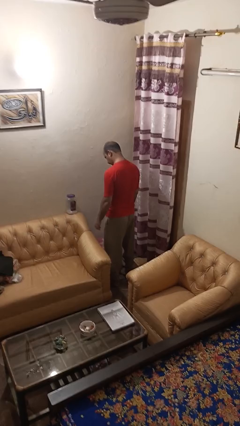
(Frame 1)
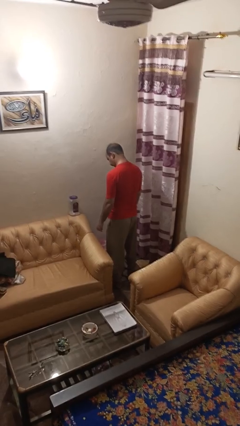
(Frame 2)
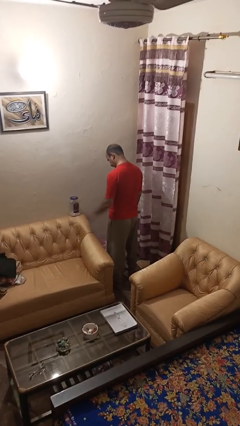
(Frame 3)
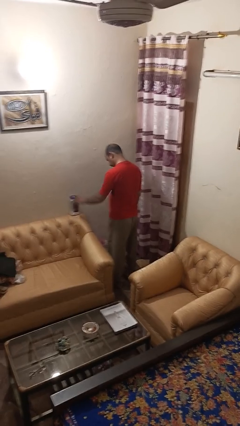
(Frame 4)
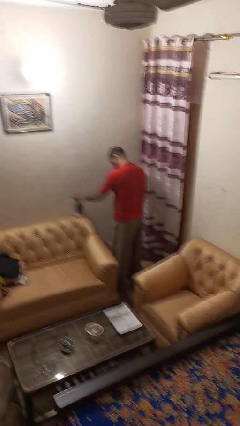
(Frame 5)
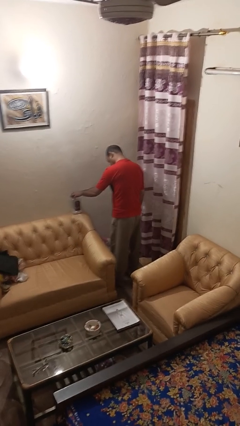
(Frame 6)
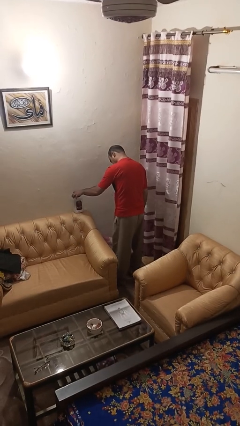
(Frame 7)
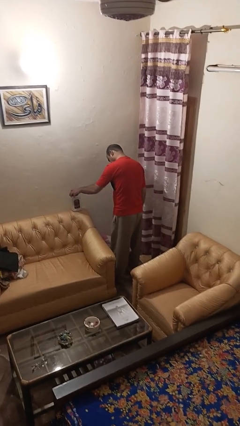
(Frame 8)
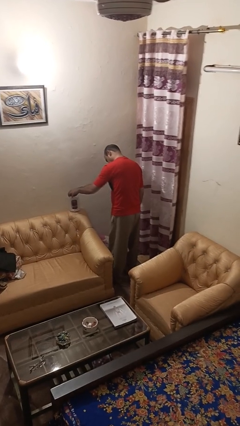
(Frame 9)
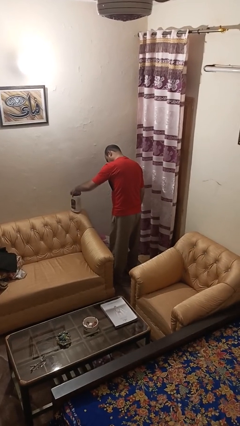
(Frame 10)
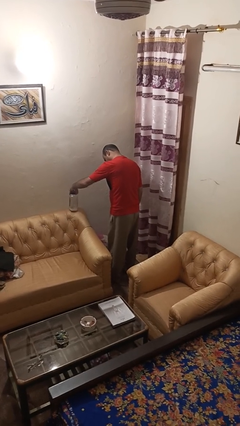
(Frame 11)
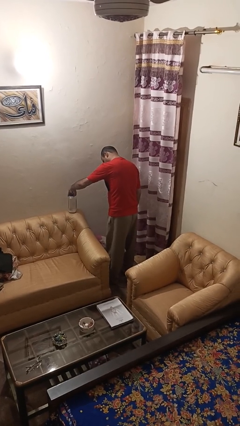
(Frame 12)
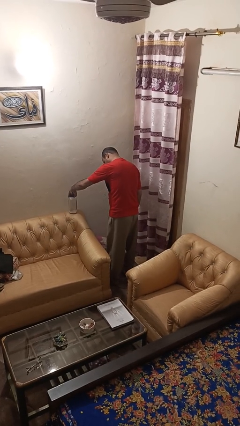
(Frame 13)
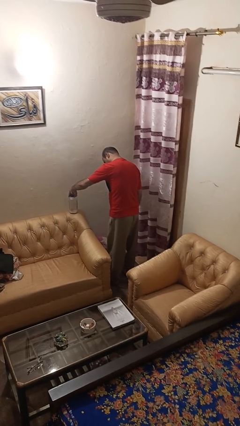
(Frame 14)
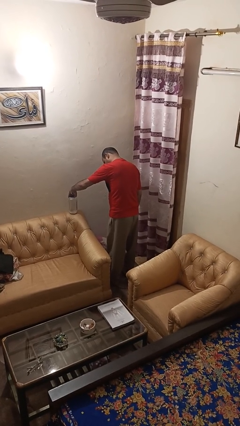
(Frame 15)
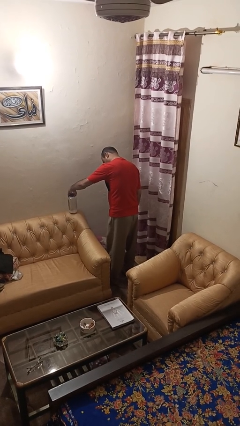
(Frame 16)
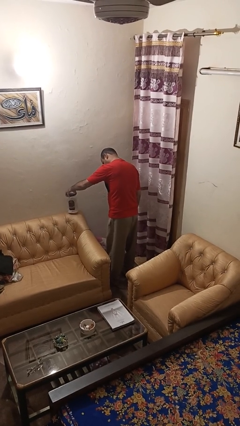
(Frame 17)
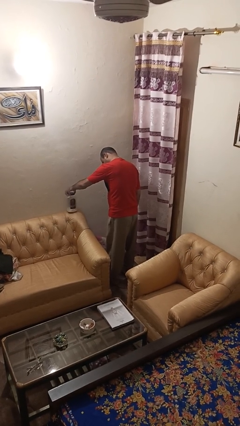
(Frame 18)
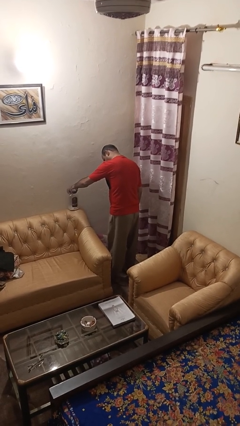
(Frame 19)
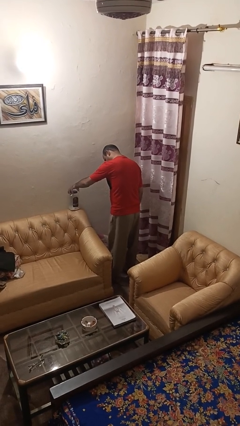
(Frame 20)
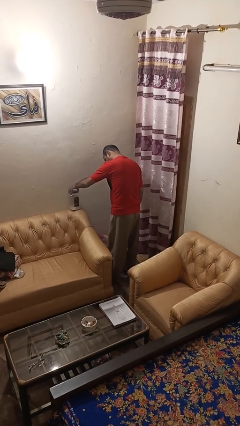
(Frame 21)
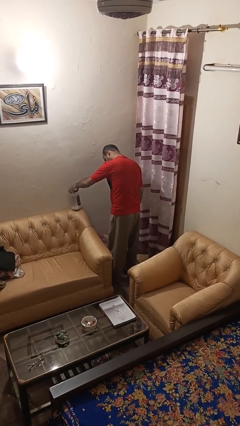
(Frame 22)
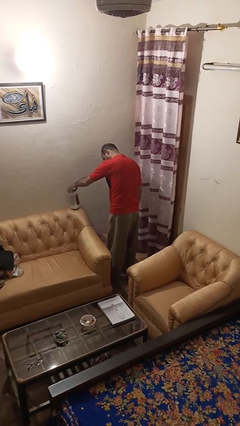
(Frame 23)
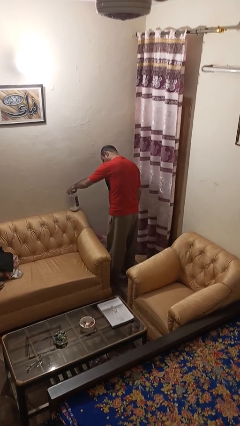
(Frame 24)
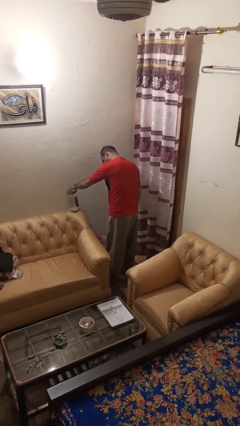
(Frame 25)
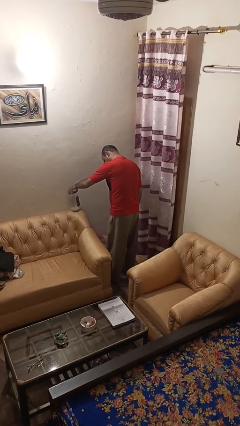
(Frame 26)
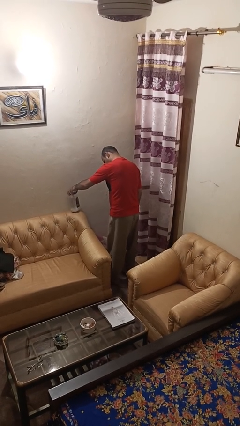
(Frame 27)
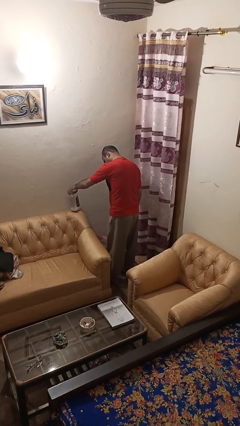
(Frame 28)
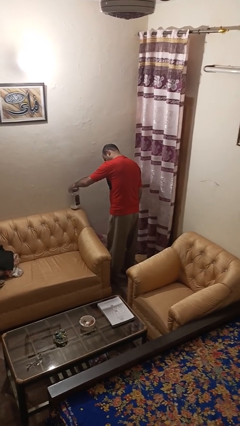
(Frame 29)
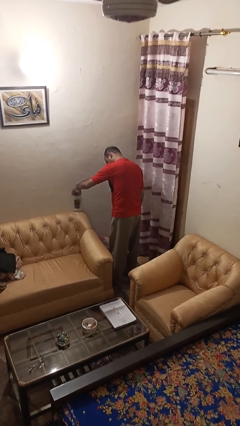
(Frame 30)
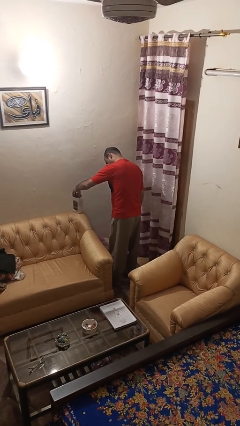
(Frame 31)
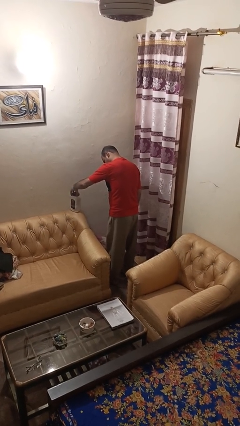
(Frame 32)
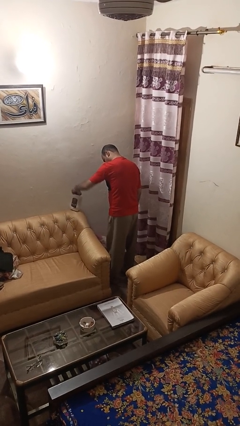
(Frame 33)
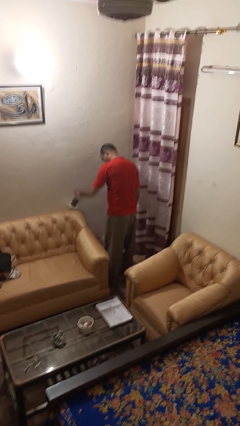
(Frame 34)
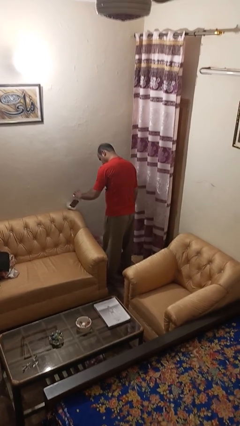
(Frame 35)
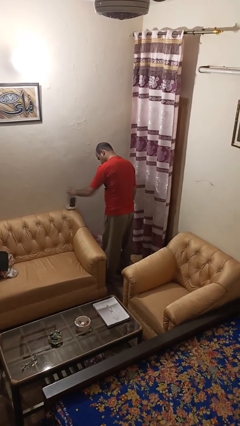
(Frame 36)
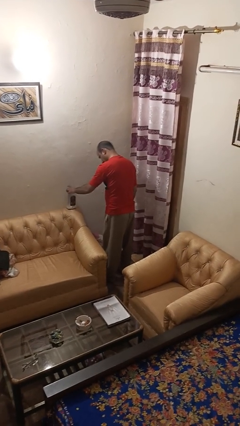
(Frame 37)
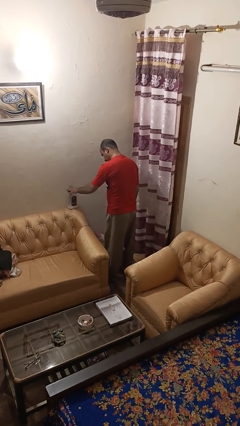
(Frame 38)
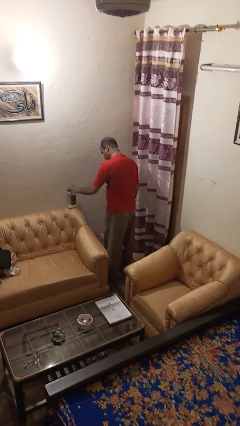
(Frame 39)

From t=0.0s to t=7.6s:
person taps object with finger

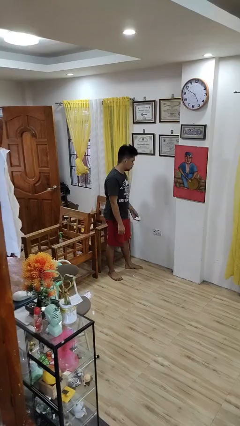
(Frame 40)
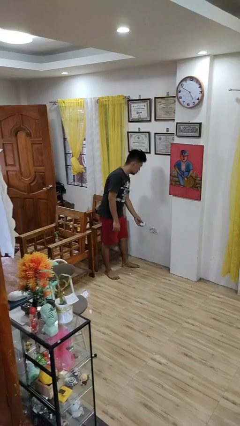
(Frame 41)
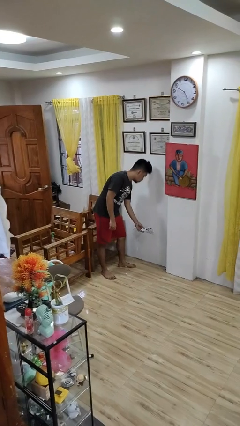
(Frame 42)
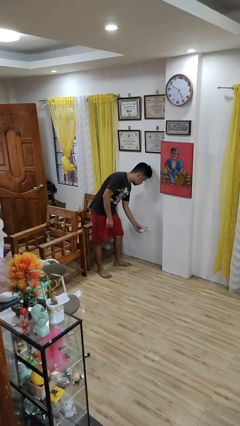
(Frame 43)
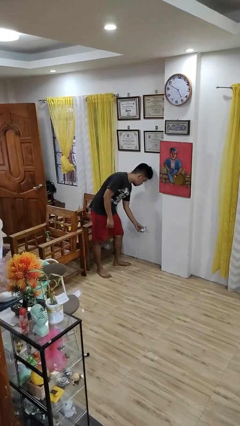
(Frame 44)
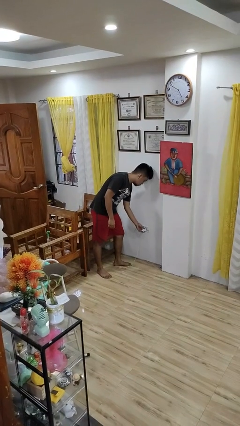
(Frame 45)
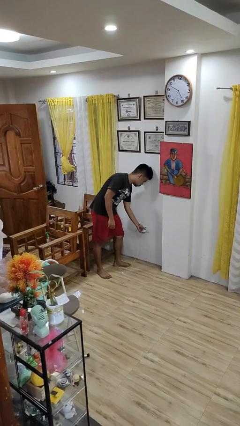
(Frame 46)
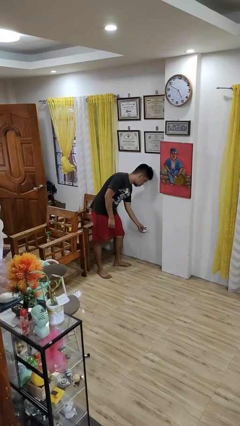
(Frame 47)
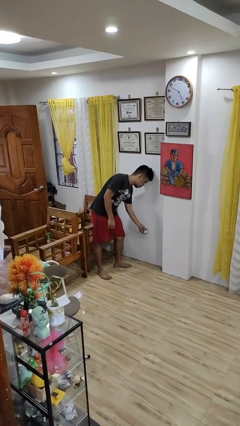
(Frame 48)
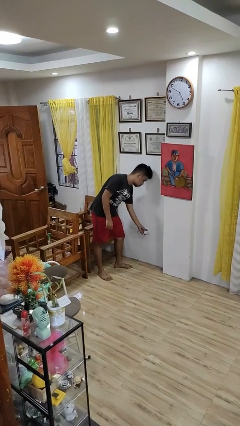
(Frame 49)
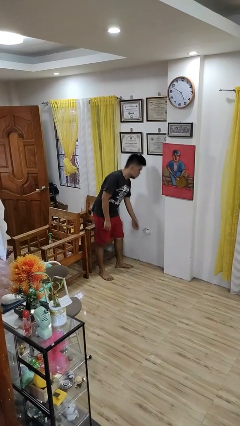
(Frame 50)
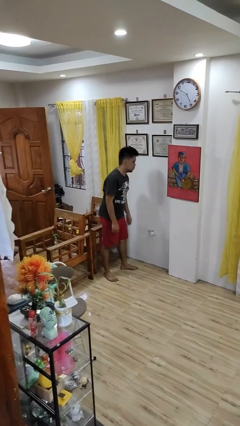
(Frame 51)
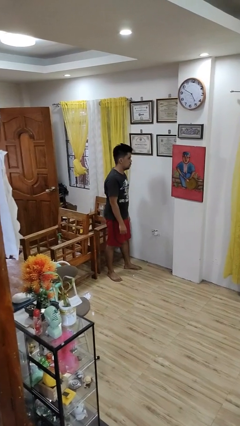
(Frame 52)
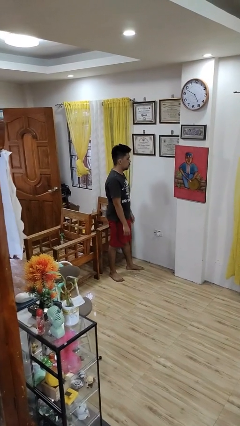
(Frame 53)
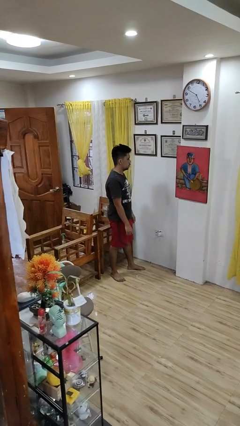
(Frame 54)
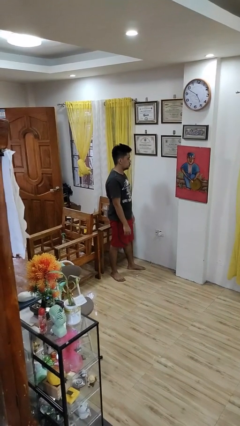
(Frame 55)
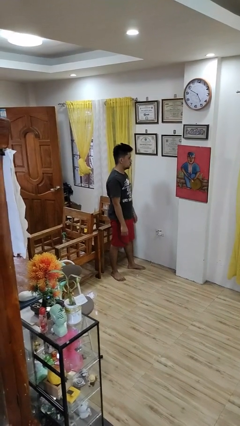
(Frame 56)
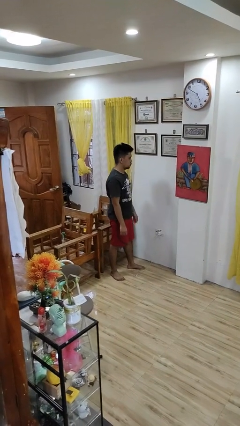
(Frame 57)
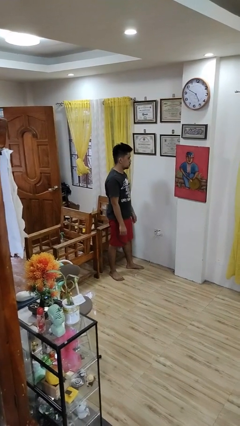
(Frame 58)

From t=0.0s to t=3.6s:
person plugs into electrical socket

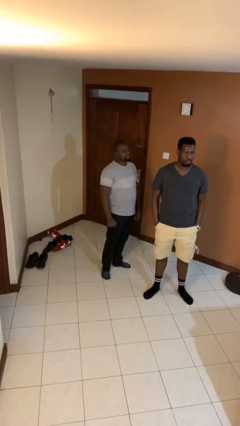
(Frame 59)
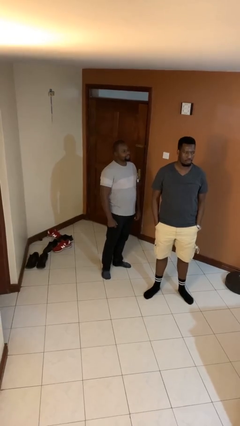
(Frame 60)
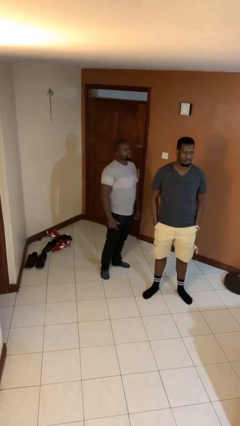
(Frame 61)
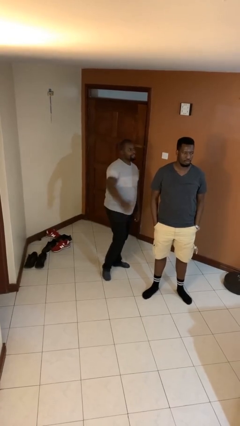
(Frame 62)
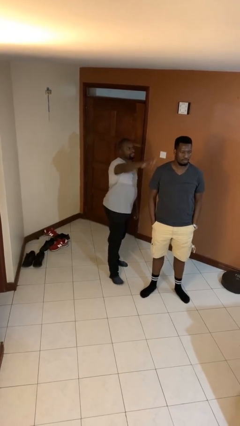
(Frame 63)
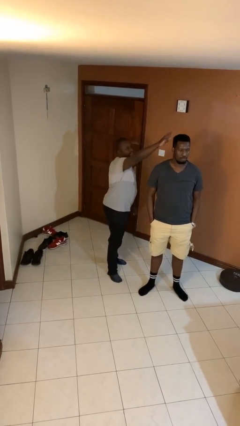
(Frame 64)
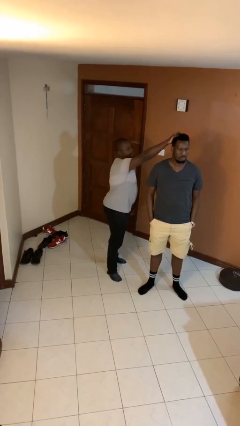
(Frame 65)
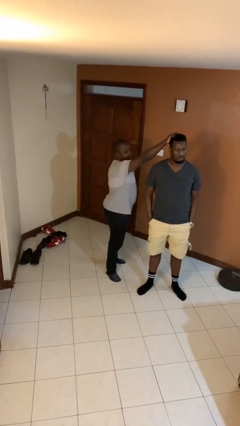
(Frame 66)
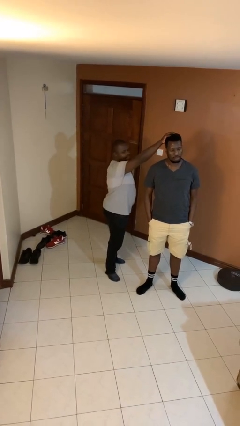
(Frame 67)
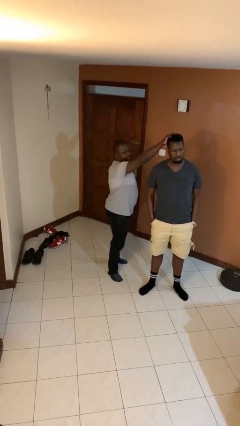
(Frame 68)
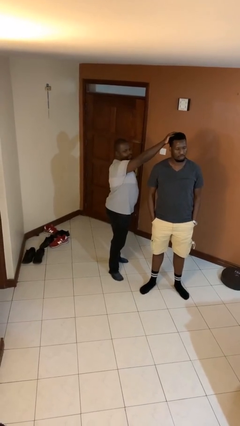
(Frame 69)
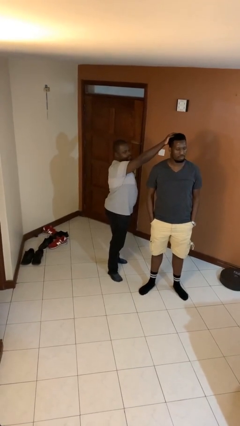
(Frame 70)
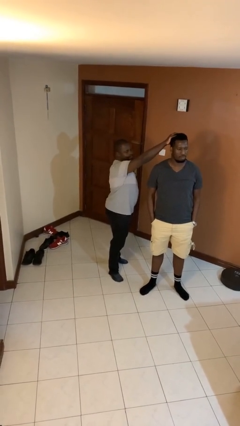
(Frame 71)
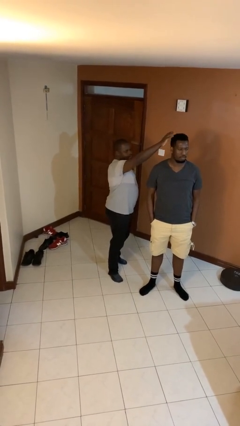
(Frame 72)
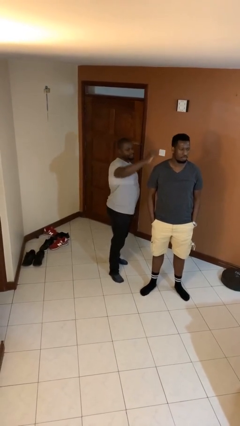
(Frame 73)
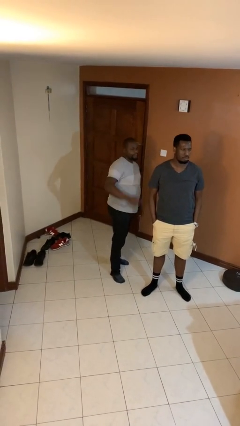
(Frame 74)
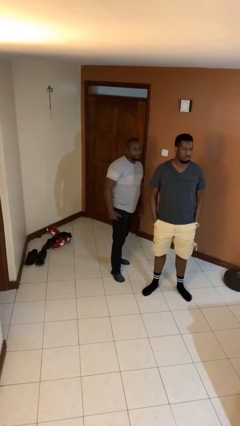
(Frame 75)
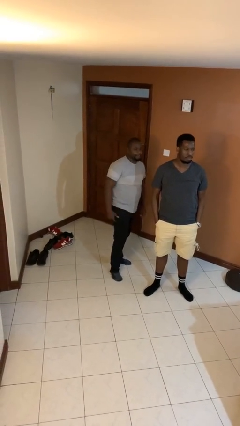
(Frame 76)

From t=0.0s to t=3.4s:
person grabs person by hair

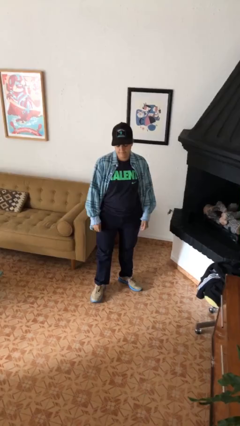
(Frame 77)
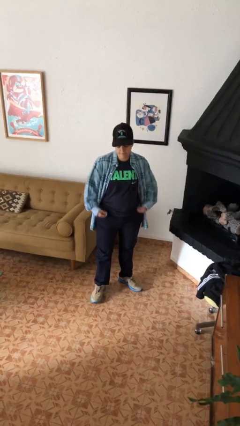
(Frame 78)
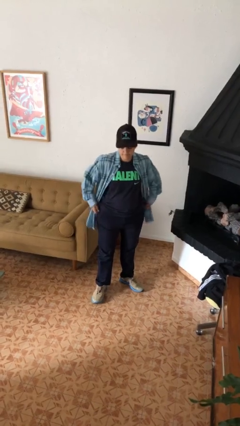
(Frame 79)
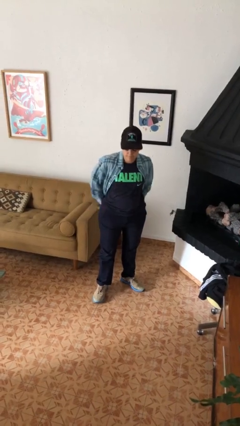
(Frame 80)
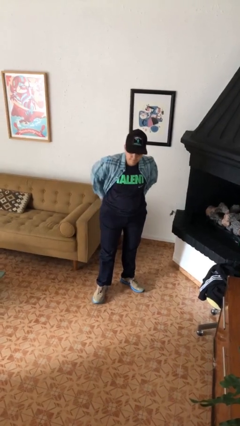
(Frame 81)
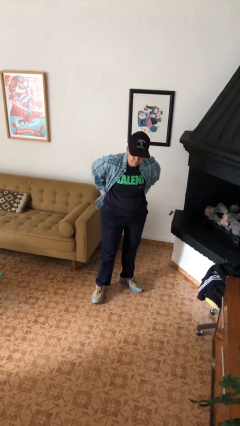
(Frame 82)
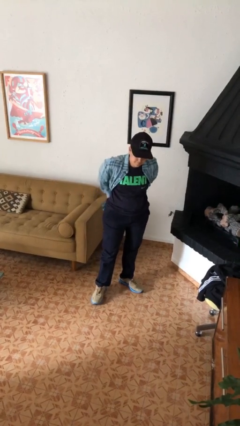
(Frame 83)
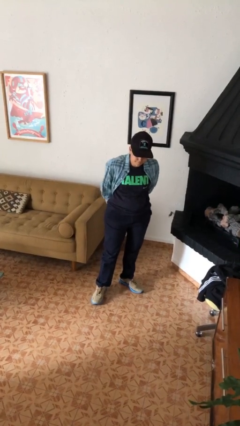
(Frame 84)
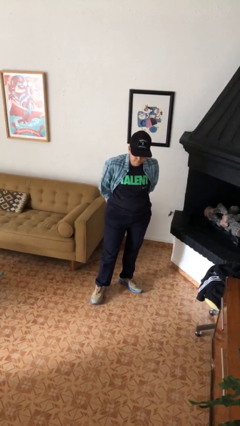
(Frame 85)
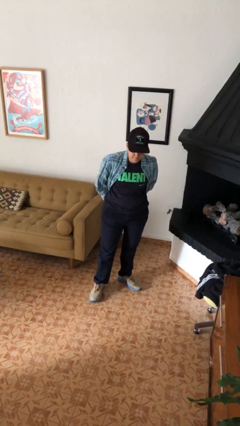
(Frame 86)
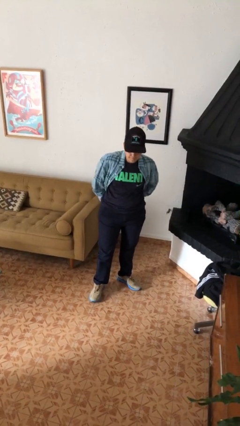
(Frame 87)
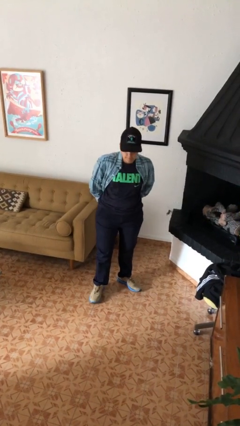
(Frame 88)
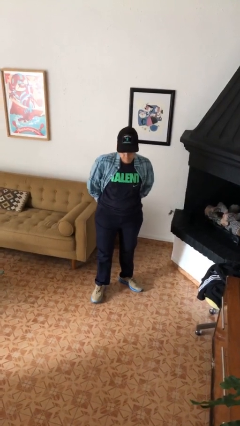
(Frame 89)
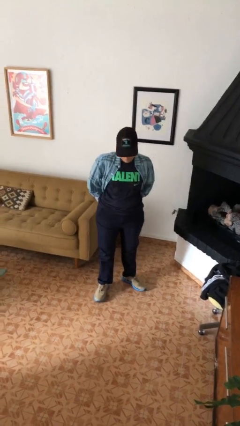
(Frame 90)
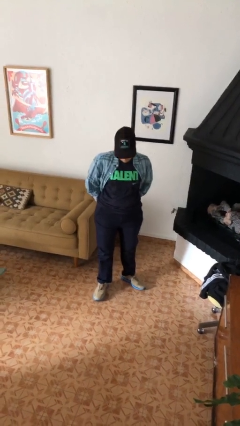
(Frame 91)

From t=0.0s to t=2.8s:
person puts hands in back pockets

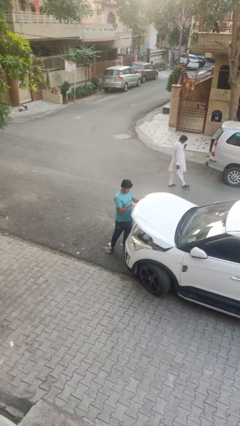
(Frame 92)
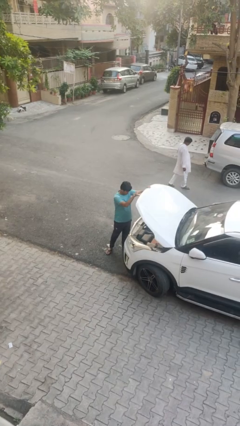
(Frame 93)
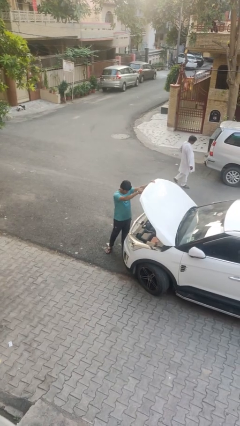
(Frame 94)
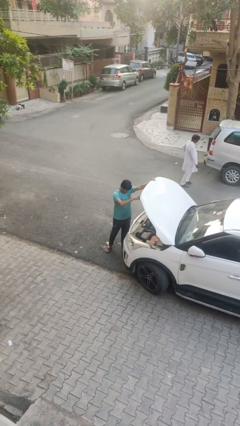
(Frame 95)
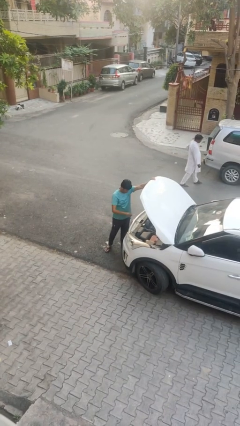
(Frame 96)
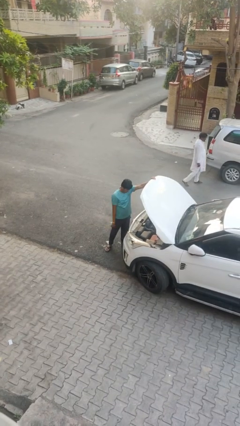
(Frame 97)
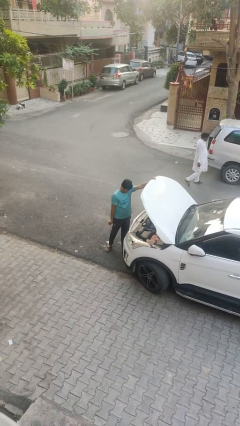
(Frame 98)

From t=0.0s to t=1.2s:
person opens car hood
